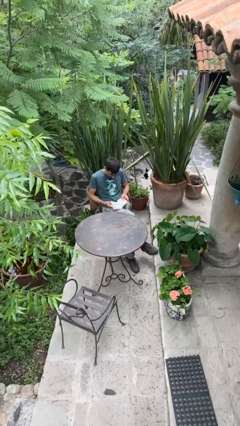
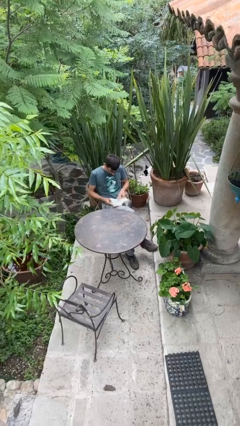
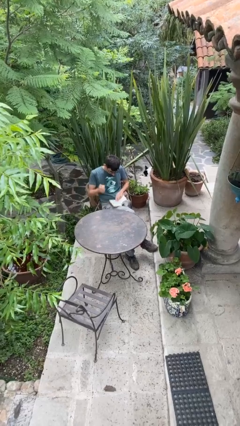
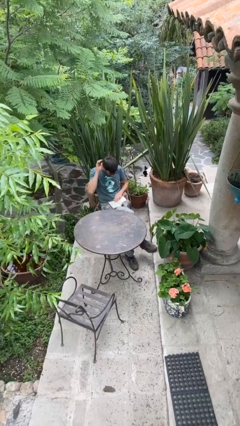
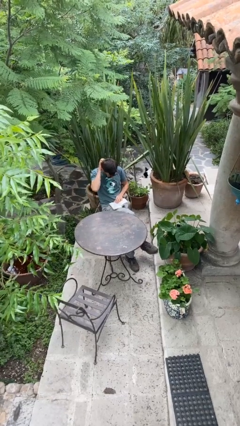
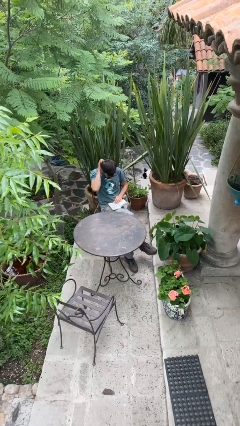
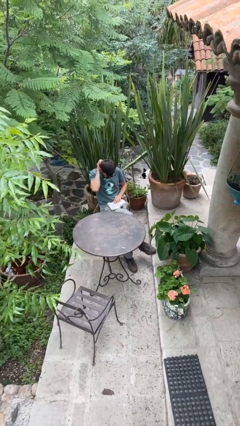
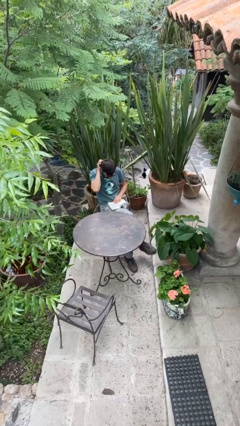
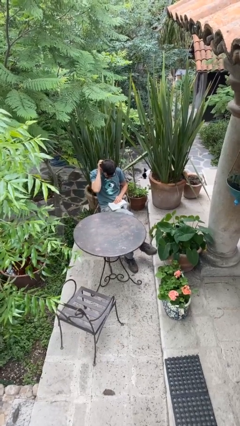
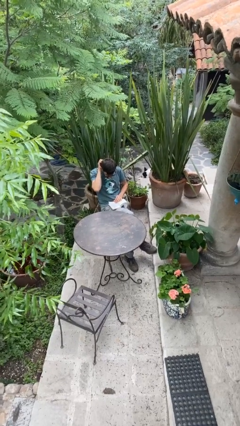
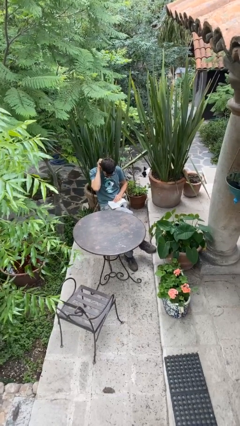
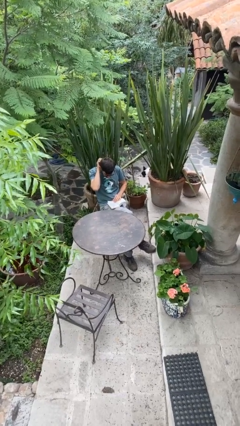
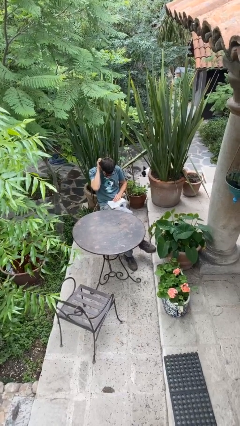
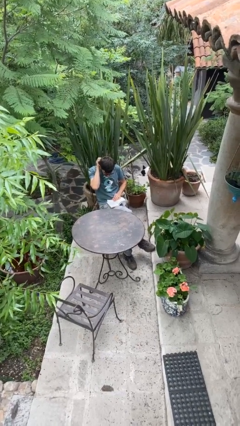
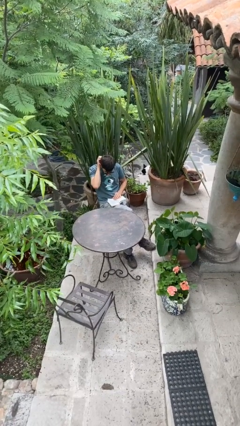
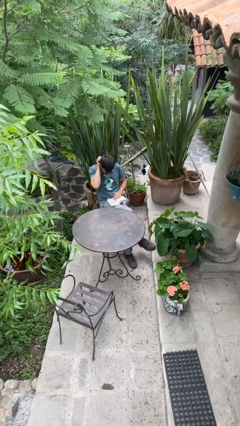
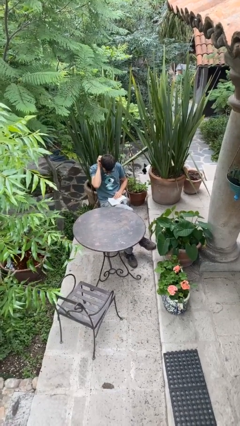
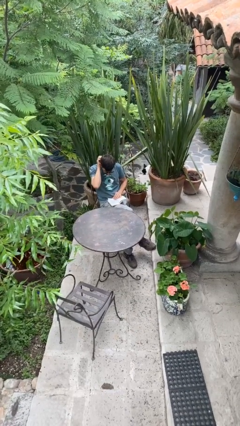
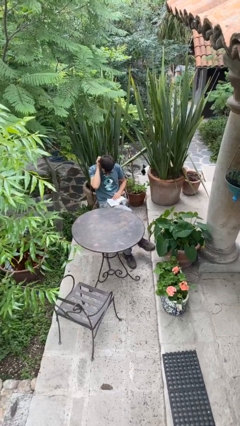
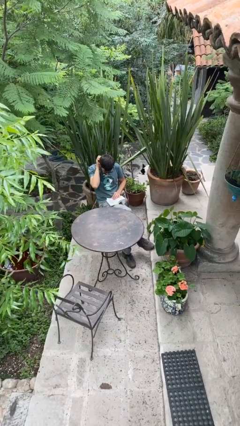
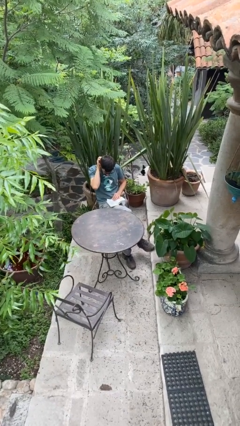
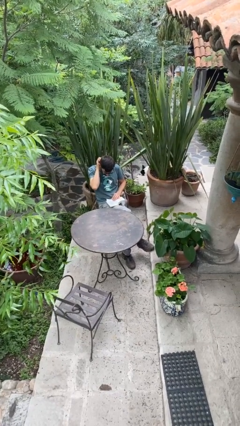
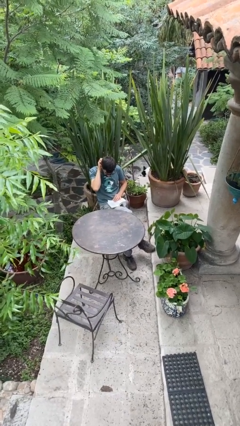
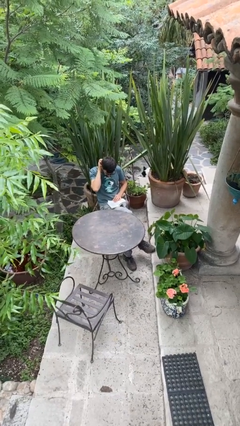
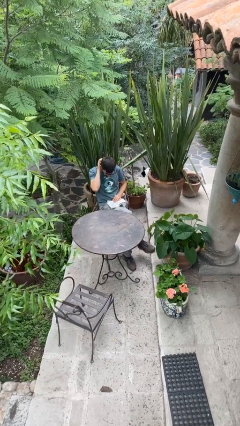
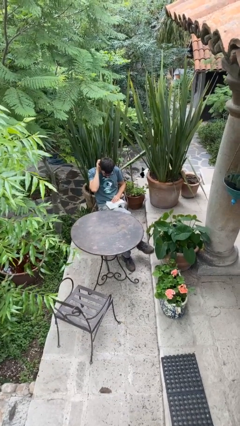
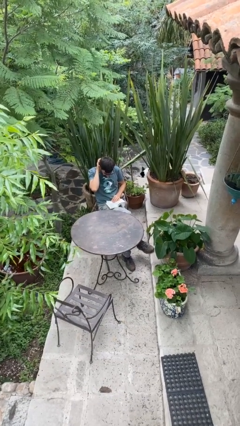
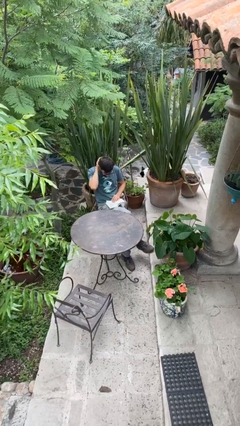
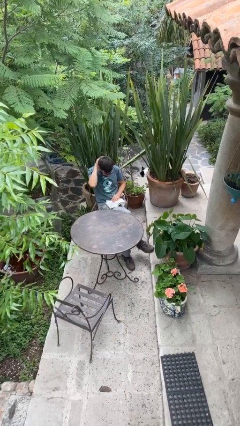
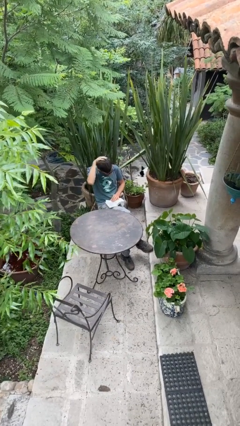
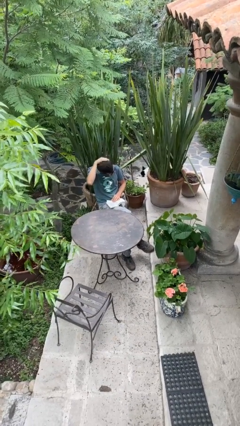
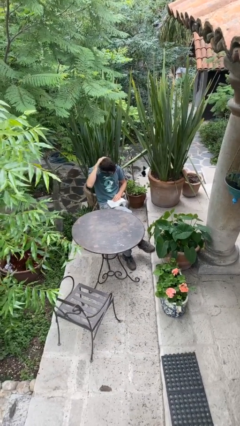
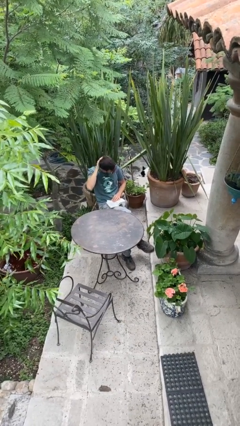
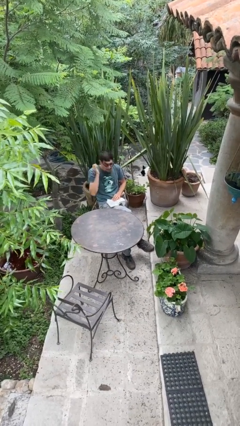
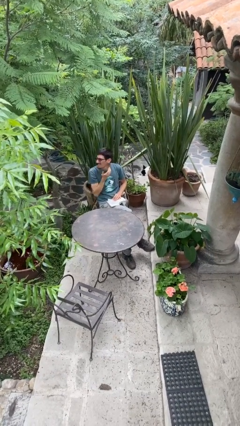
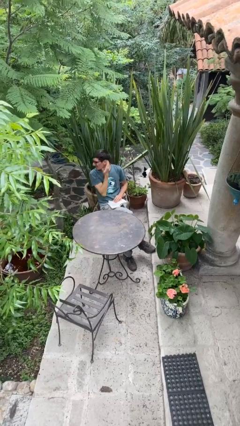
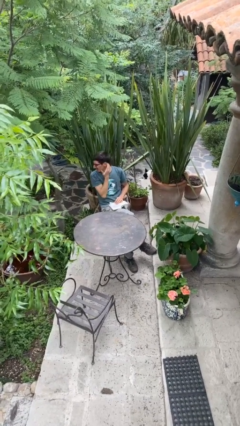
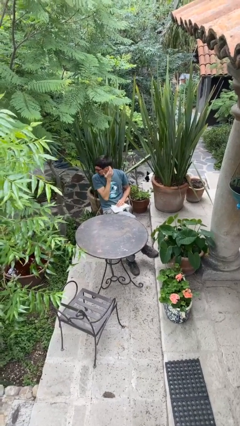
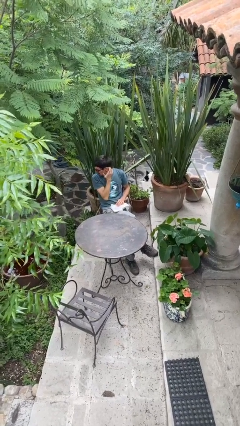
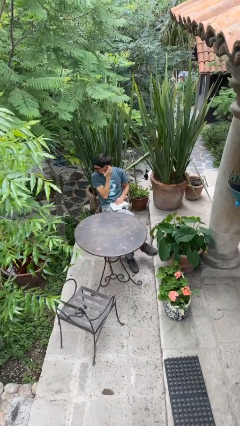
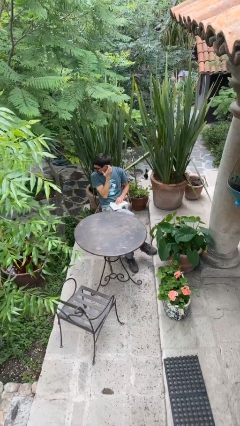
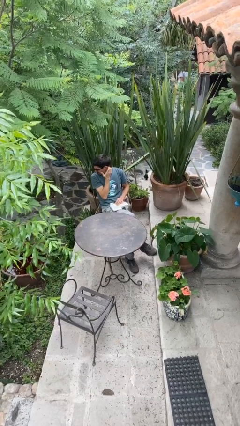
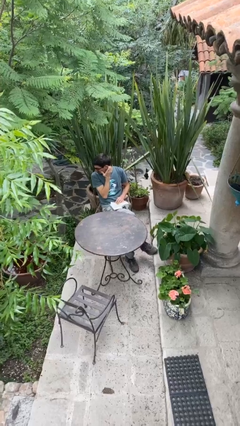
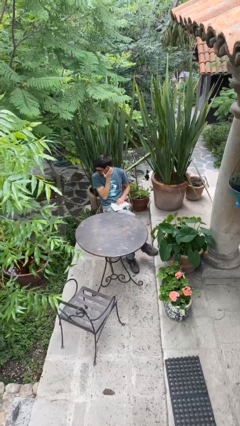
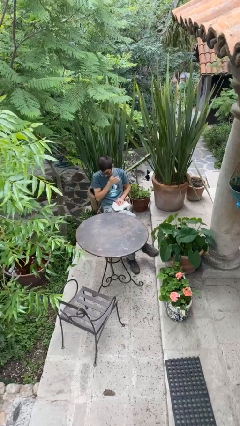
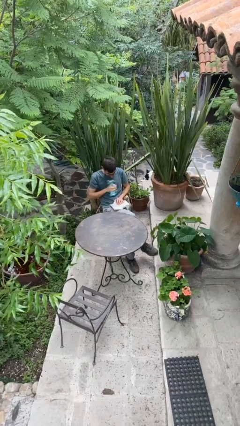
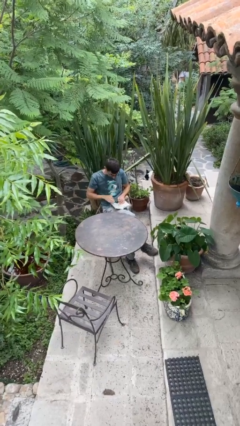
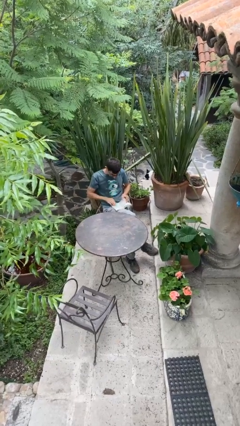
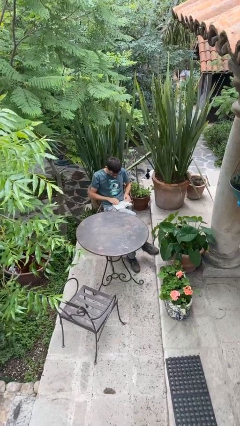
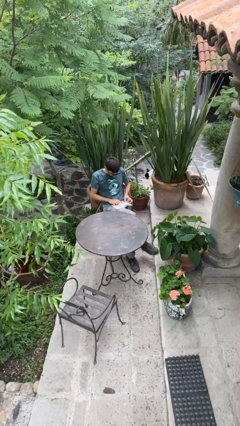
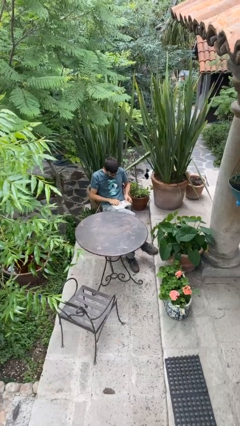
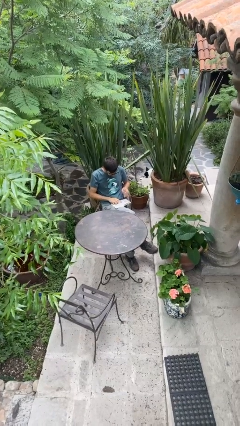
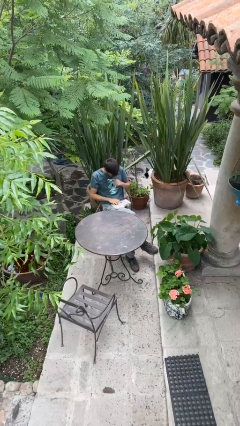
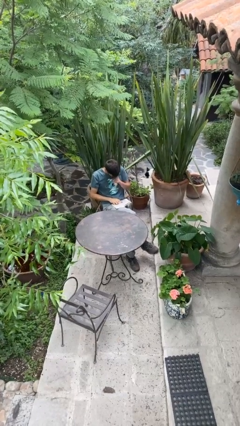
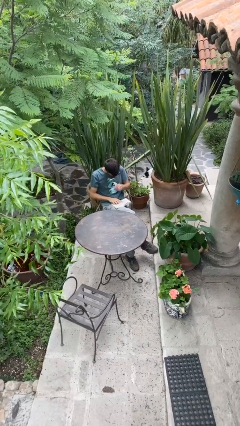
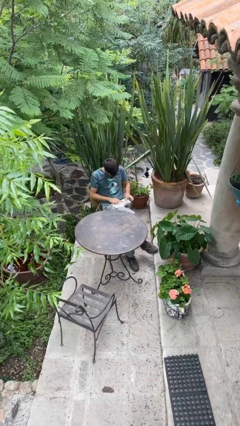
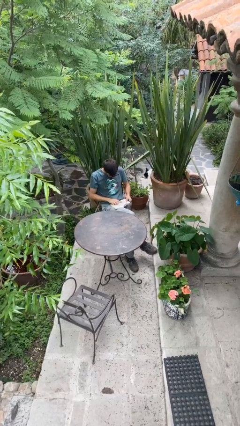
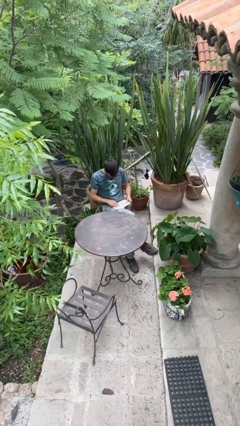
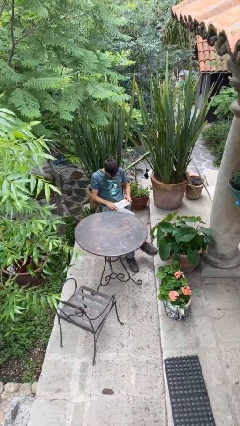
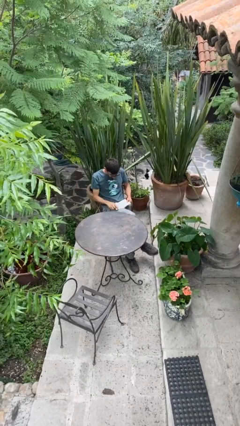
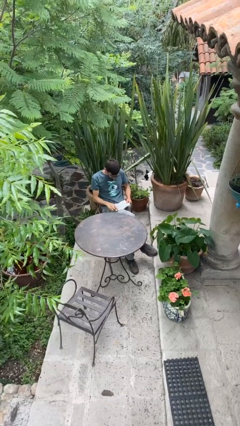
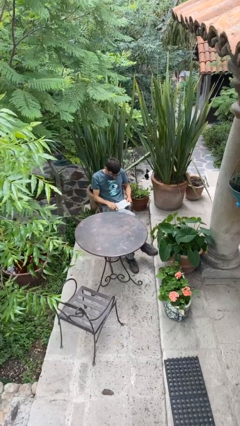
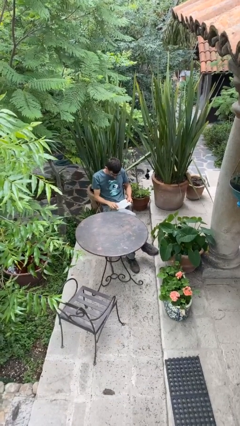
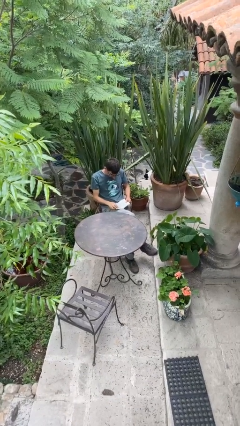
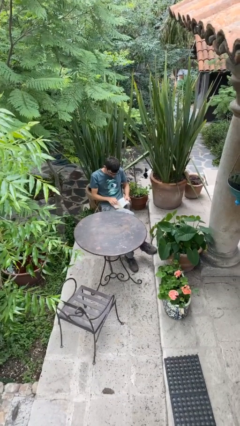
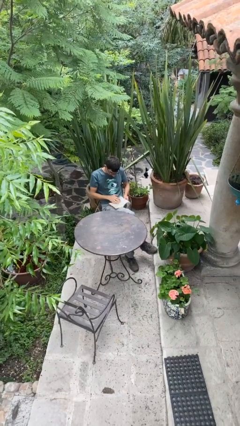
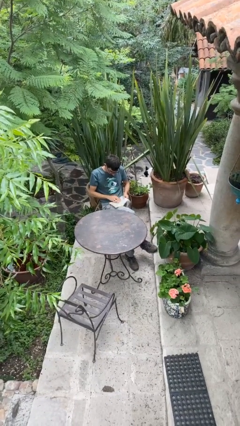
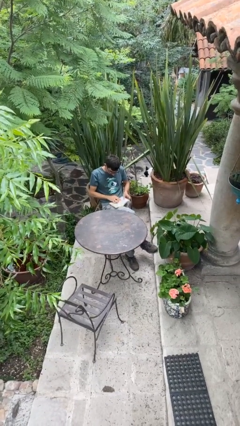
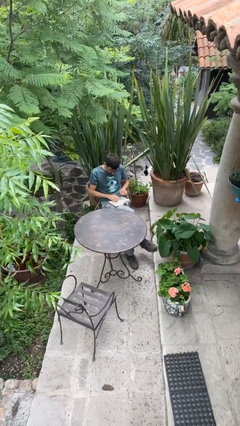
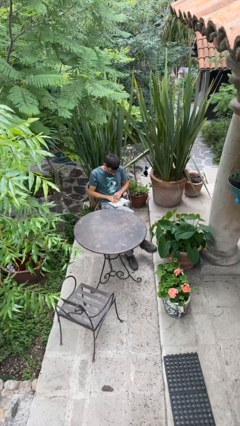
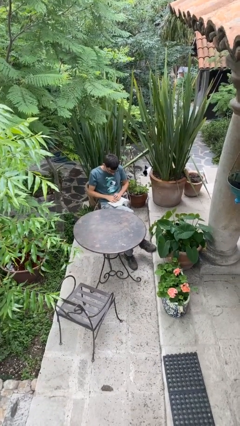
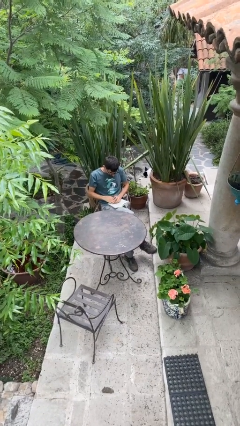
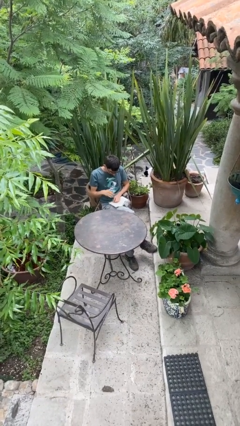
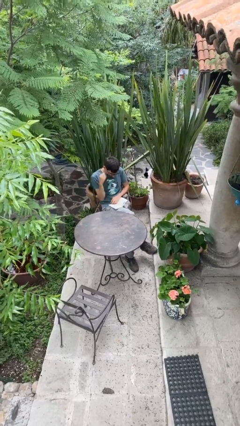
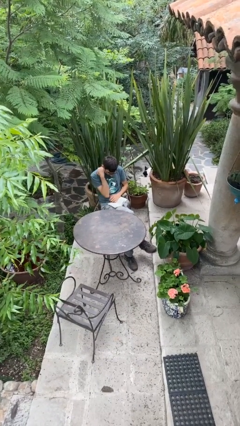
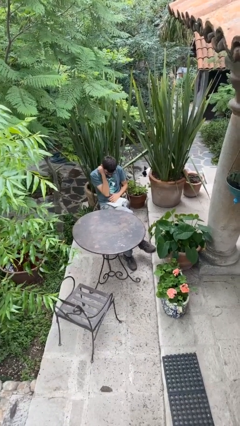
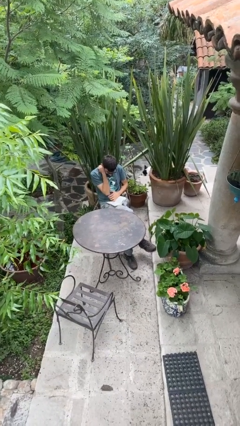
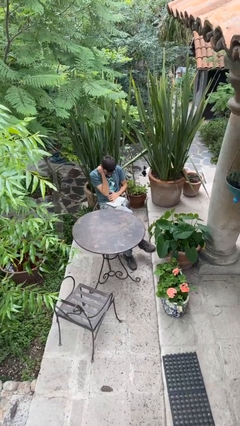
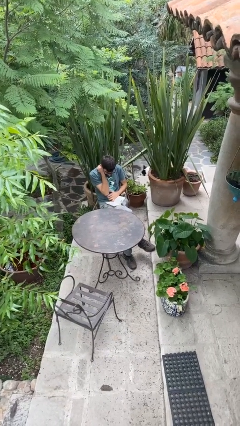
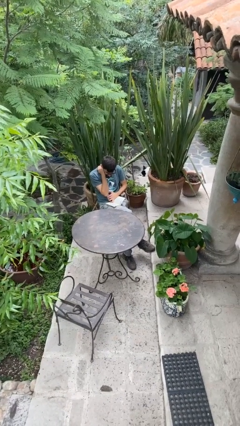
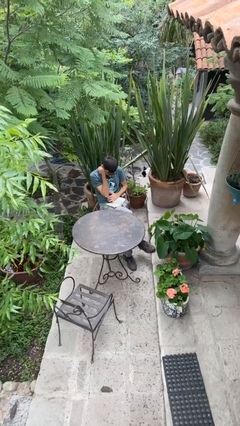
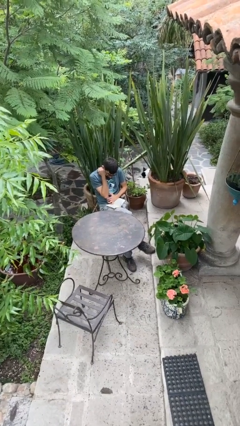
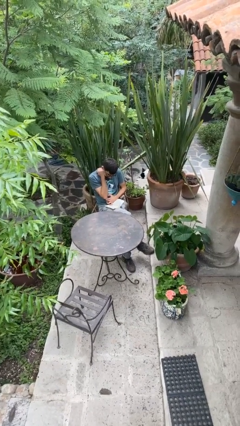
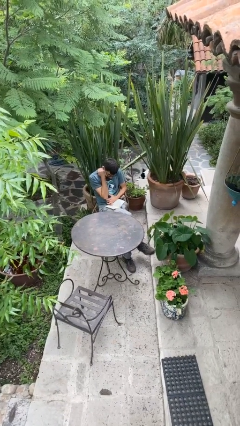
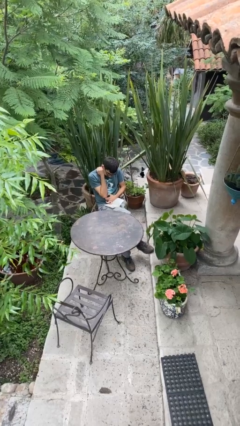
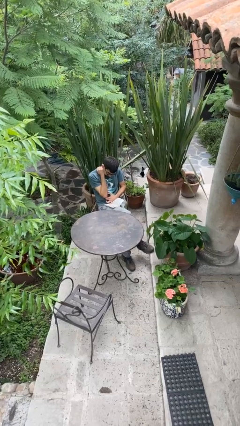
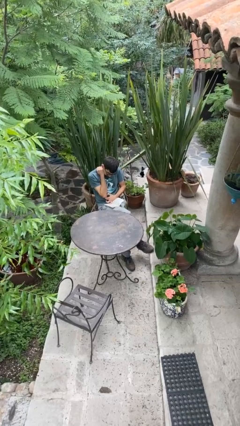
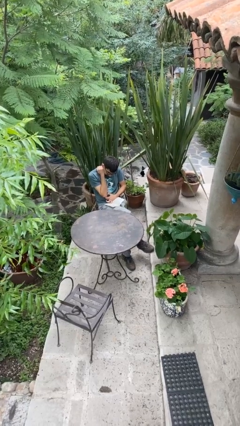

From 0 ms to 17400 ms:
person reads document

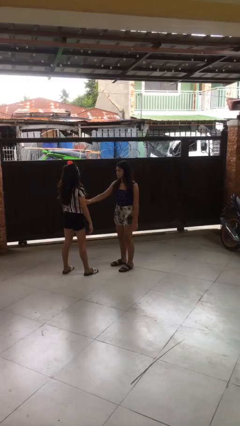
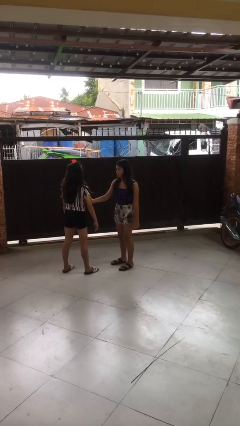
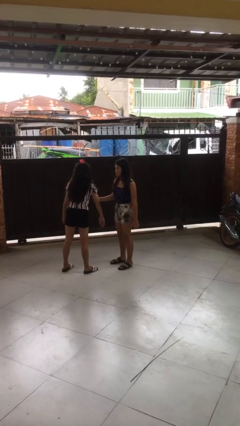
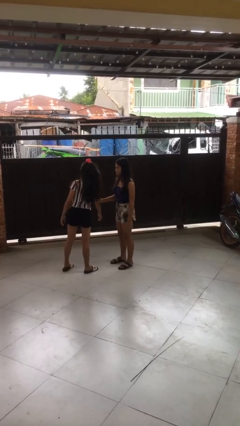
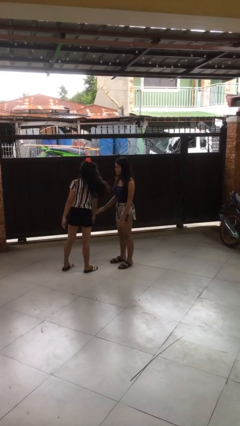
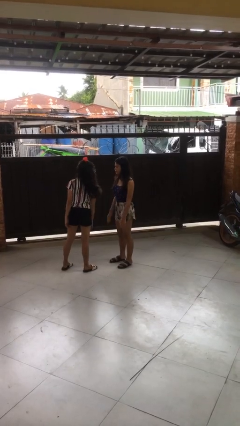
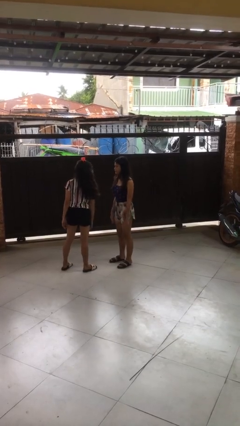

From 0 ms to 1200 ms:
person grabs person by bicep
